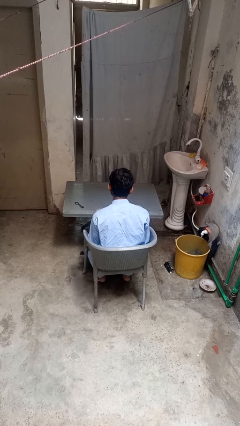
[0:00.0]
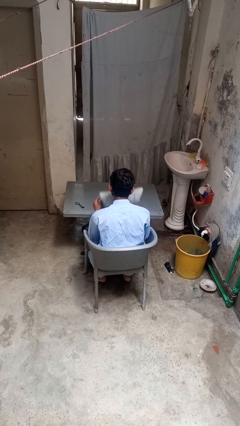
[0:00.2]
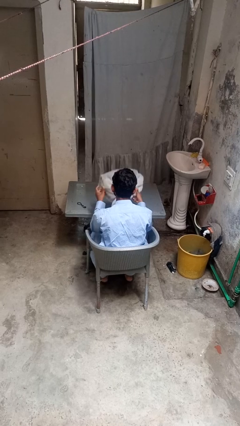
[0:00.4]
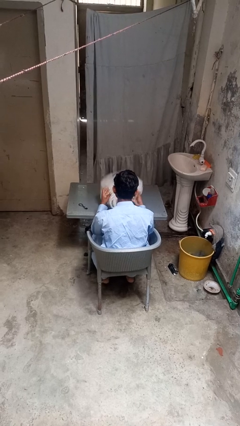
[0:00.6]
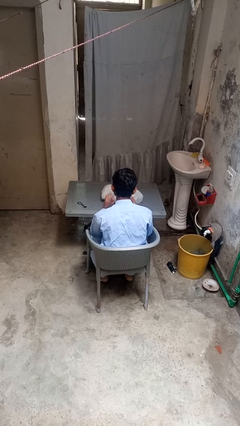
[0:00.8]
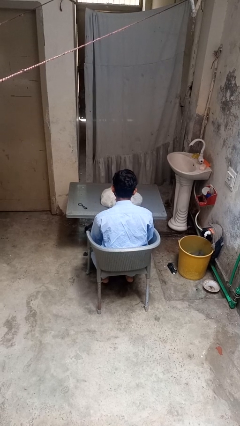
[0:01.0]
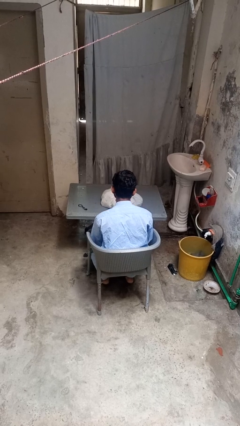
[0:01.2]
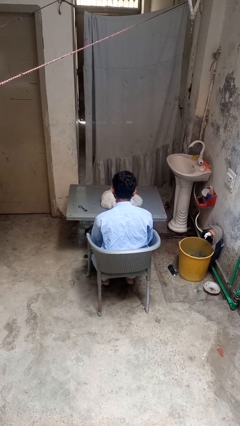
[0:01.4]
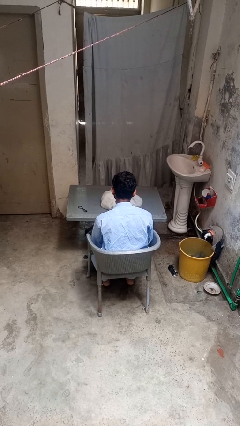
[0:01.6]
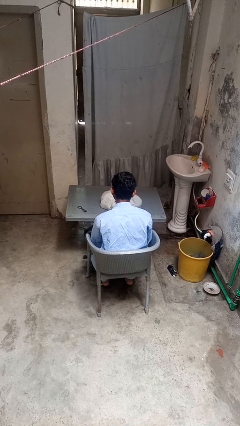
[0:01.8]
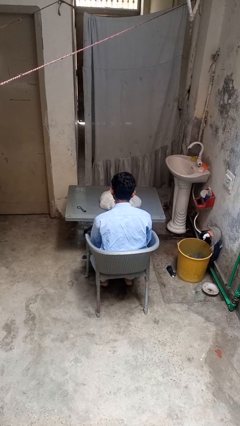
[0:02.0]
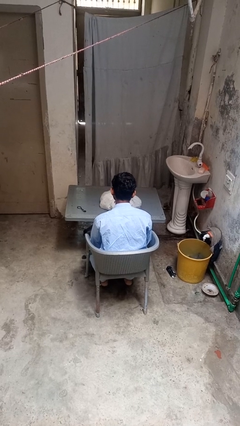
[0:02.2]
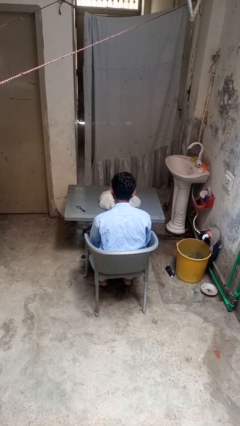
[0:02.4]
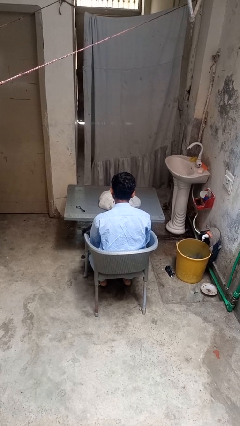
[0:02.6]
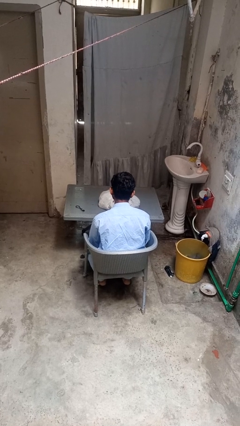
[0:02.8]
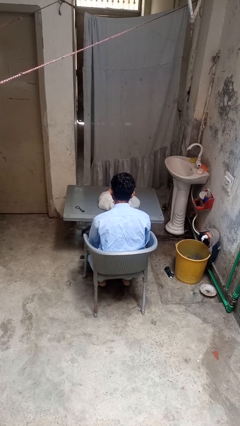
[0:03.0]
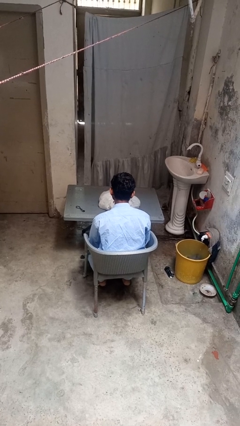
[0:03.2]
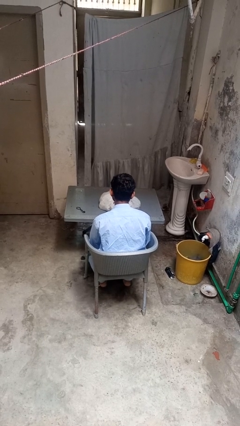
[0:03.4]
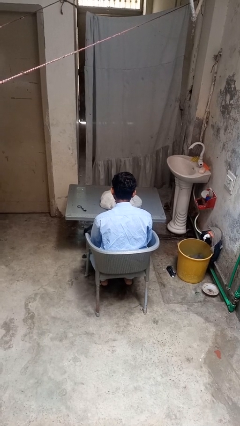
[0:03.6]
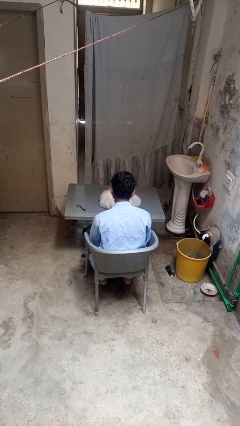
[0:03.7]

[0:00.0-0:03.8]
person throws object on table

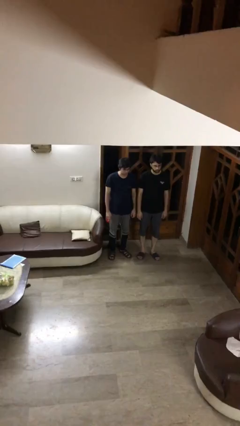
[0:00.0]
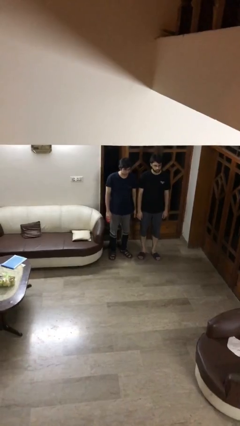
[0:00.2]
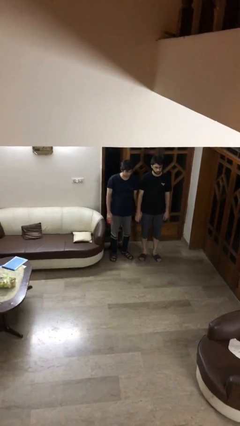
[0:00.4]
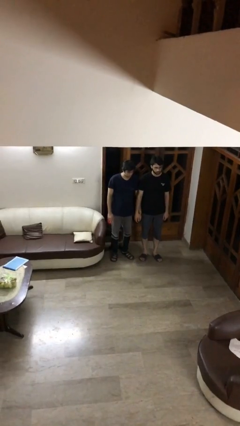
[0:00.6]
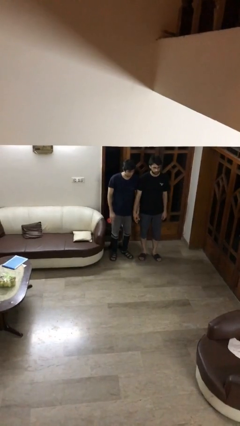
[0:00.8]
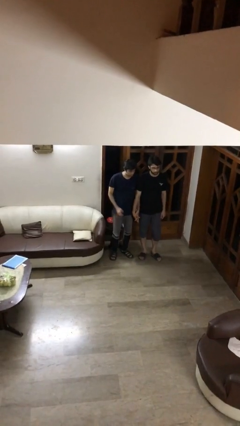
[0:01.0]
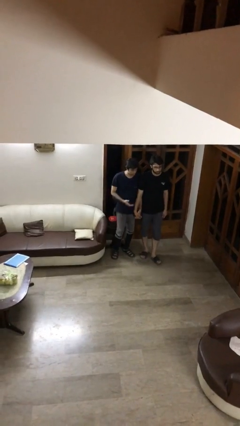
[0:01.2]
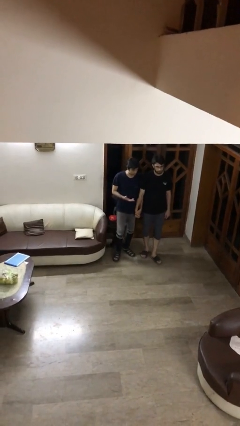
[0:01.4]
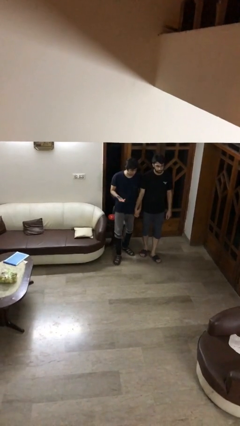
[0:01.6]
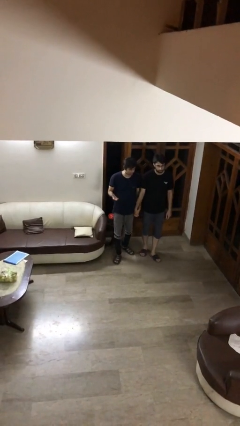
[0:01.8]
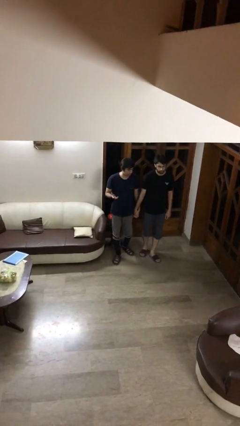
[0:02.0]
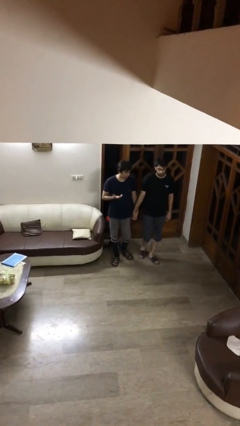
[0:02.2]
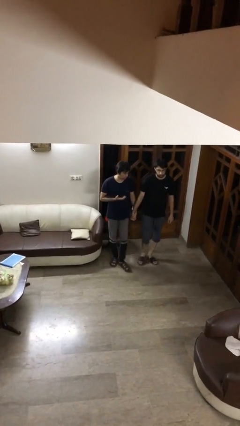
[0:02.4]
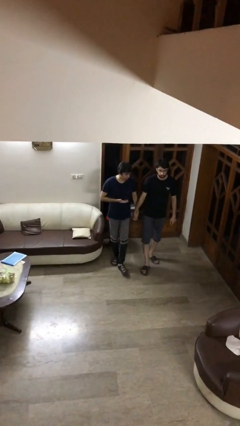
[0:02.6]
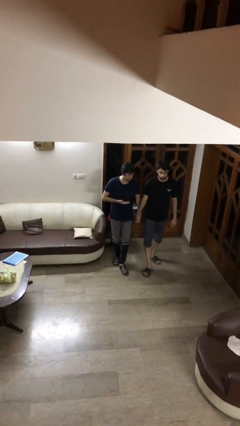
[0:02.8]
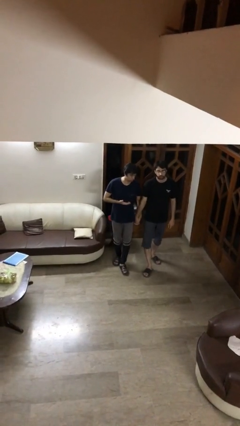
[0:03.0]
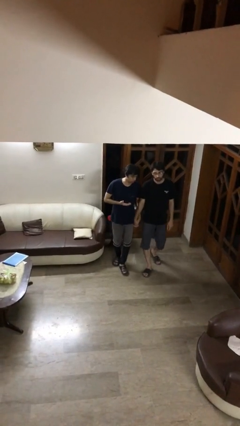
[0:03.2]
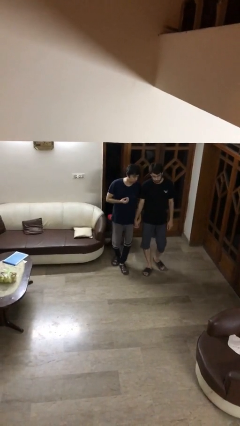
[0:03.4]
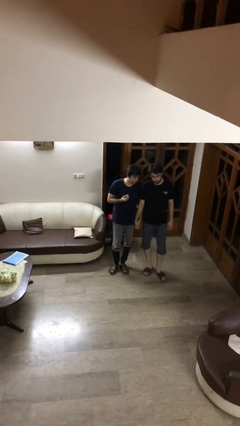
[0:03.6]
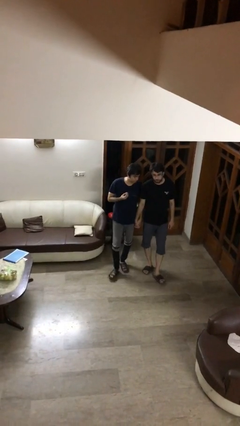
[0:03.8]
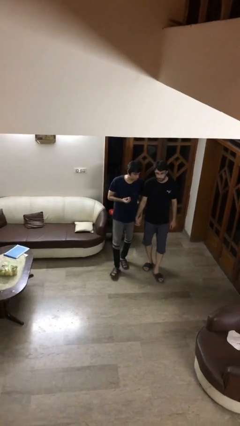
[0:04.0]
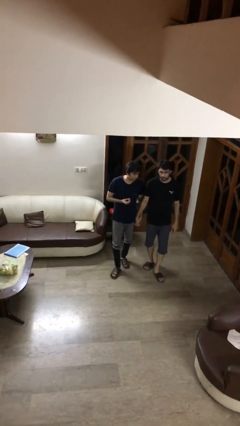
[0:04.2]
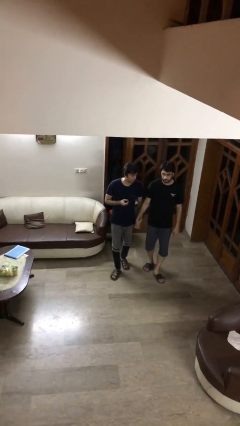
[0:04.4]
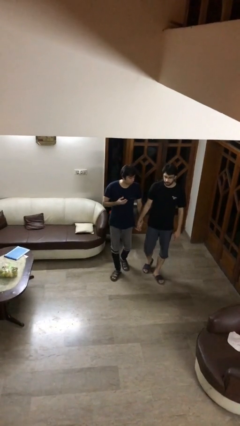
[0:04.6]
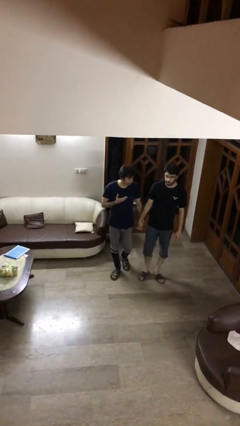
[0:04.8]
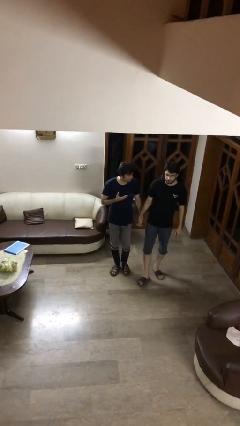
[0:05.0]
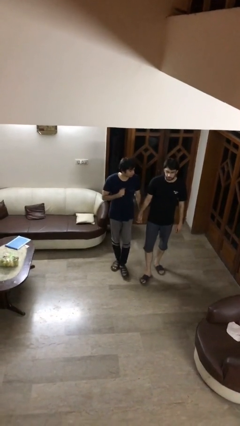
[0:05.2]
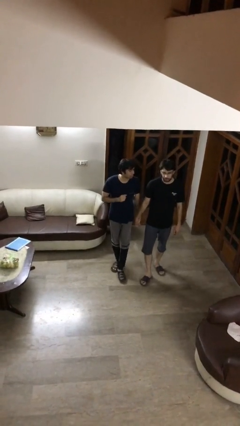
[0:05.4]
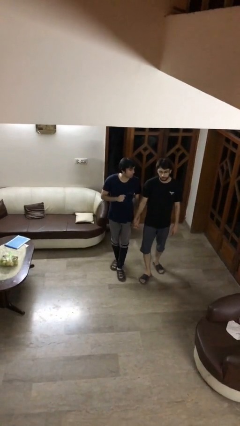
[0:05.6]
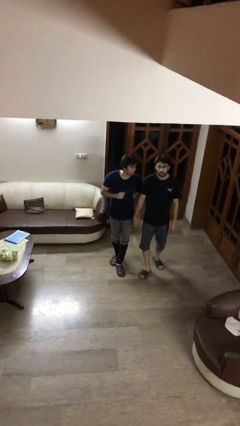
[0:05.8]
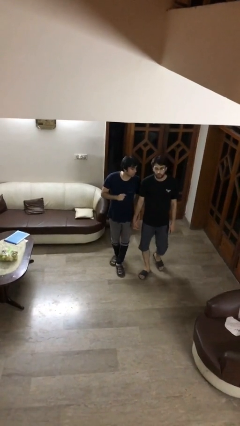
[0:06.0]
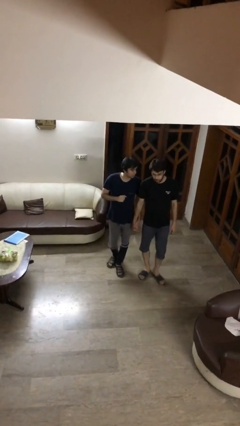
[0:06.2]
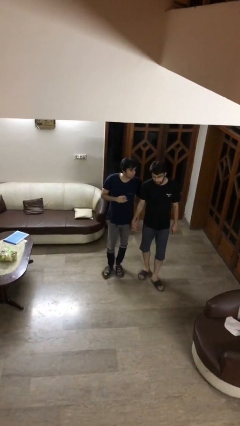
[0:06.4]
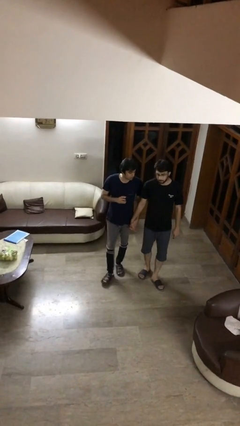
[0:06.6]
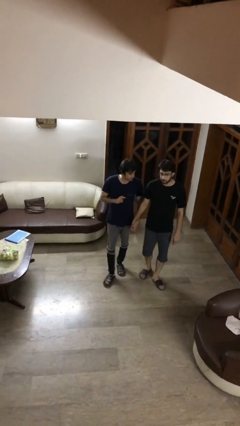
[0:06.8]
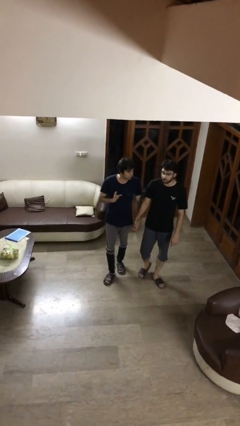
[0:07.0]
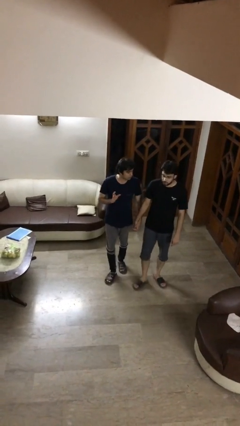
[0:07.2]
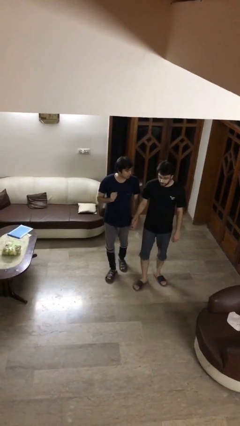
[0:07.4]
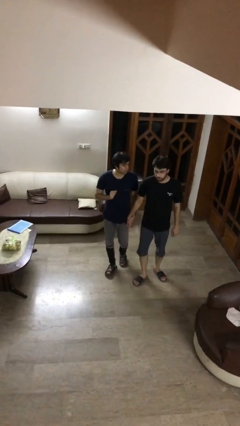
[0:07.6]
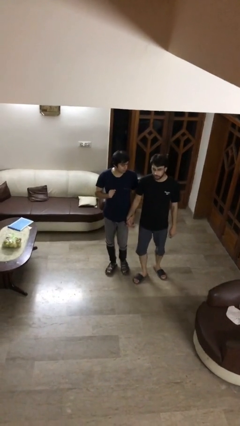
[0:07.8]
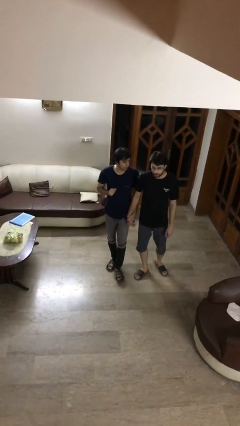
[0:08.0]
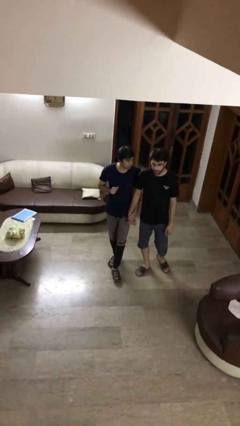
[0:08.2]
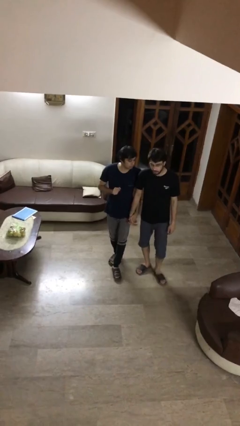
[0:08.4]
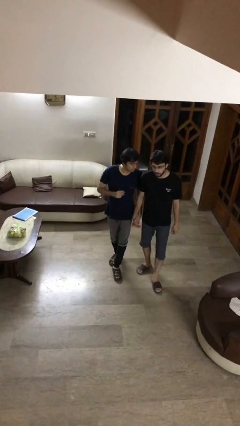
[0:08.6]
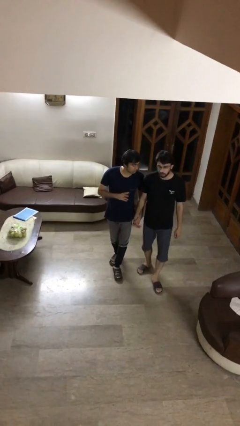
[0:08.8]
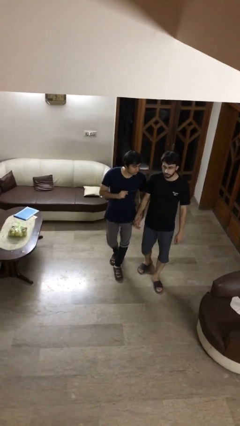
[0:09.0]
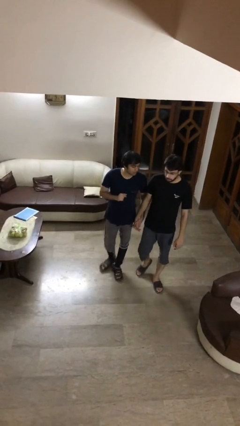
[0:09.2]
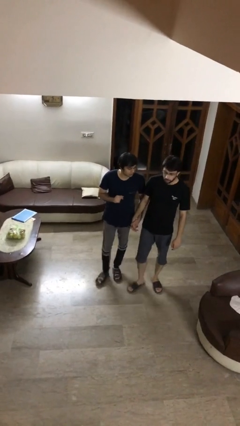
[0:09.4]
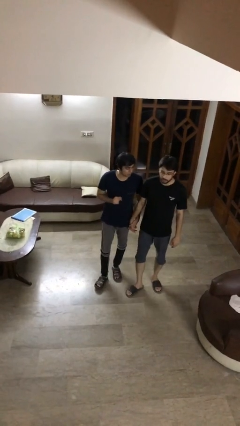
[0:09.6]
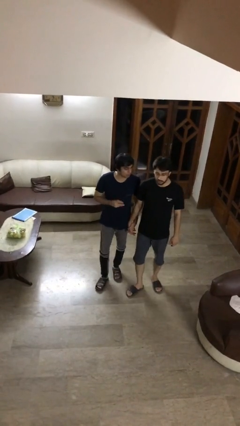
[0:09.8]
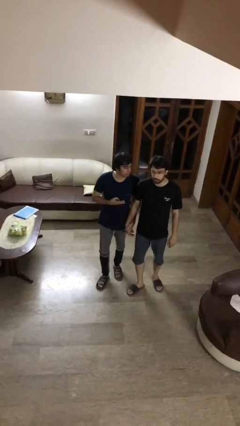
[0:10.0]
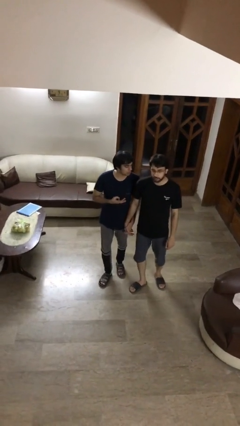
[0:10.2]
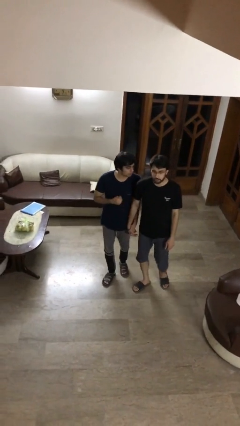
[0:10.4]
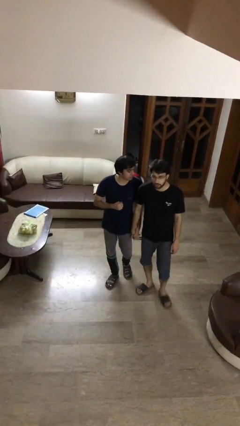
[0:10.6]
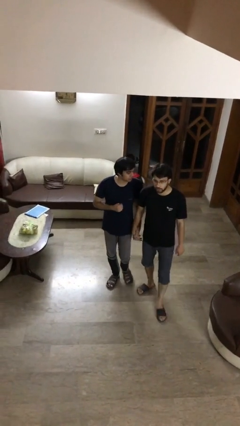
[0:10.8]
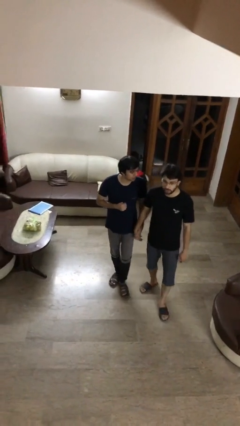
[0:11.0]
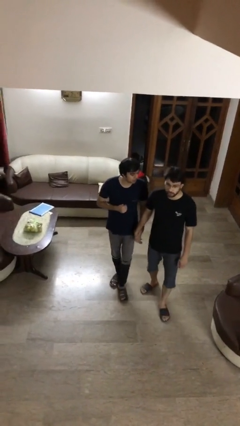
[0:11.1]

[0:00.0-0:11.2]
person holds hand

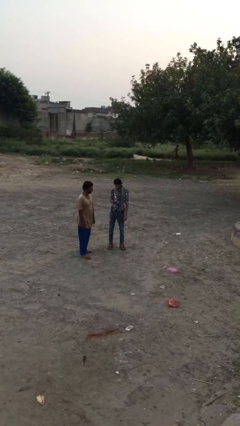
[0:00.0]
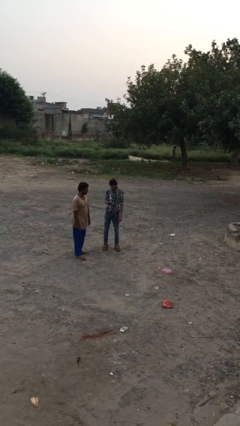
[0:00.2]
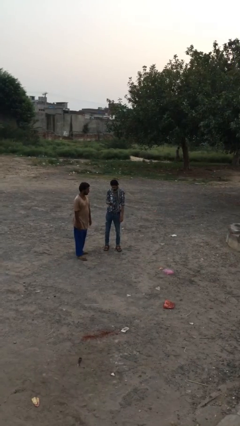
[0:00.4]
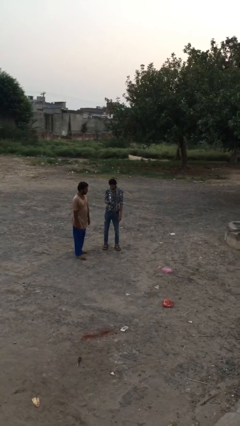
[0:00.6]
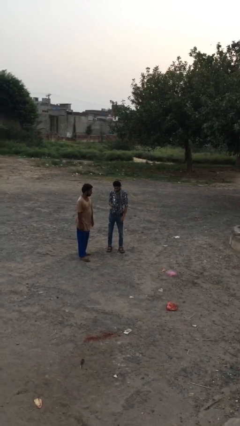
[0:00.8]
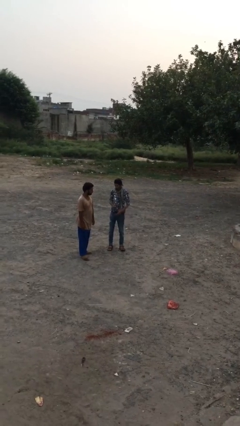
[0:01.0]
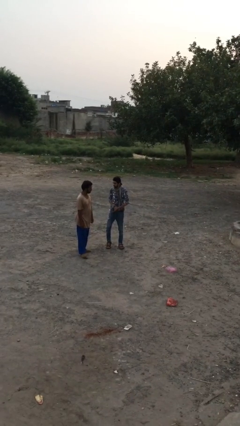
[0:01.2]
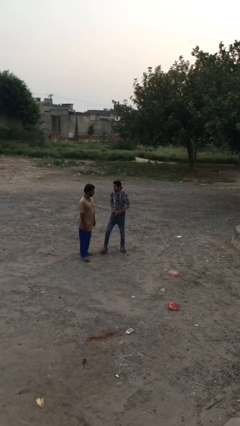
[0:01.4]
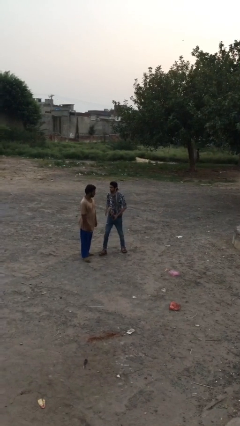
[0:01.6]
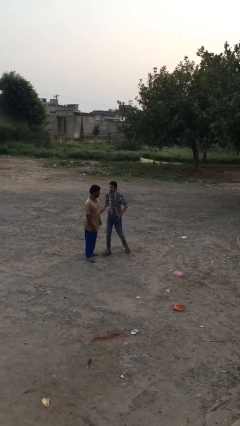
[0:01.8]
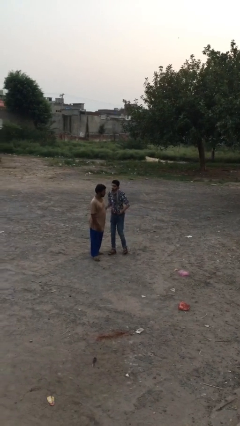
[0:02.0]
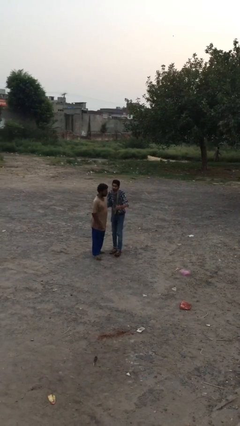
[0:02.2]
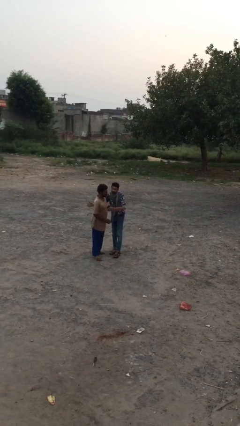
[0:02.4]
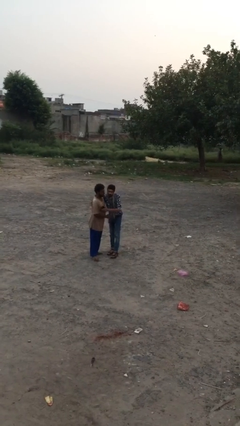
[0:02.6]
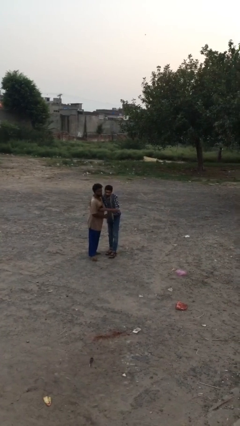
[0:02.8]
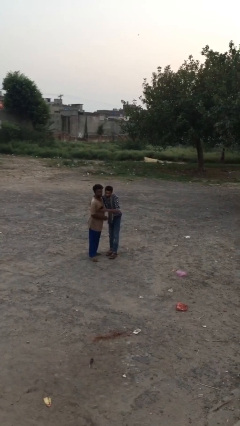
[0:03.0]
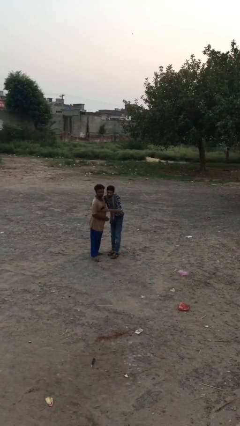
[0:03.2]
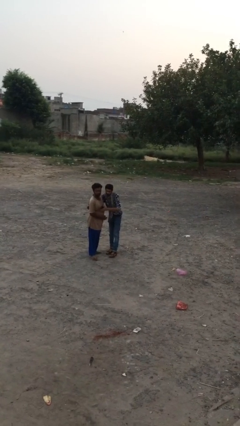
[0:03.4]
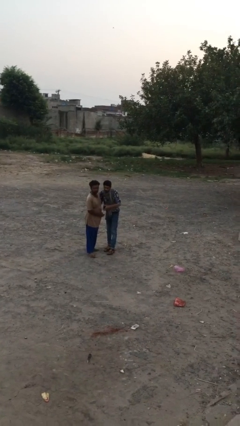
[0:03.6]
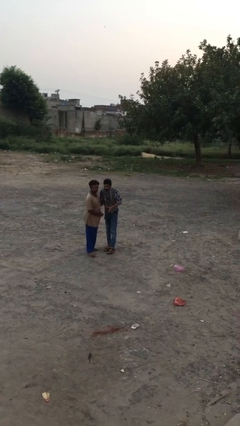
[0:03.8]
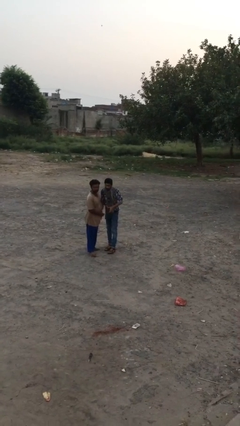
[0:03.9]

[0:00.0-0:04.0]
person embraces person
